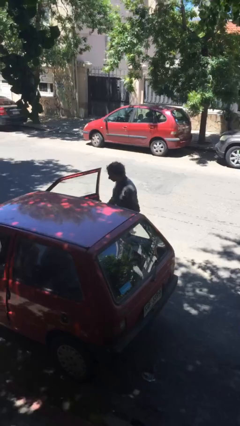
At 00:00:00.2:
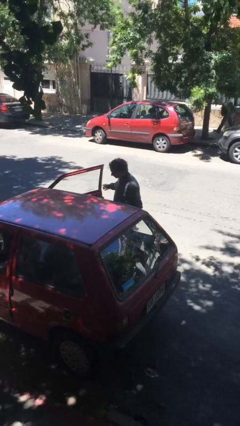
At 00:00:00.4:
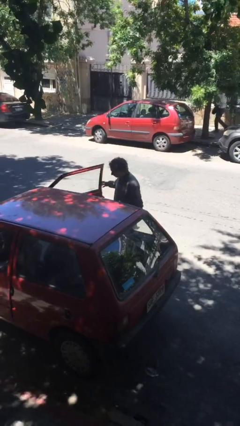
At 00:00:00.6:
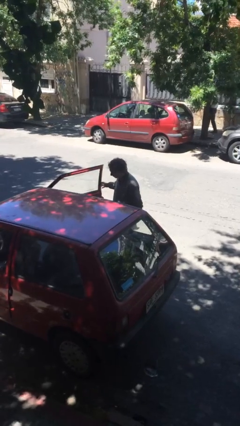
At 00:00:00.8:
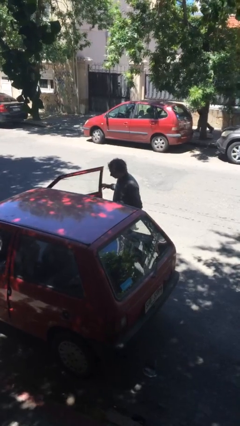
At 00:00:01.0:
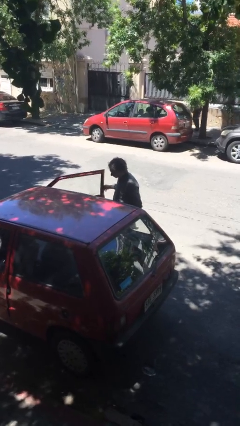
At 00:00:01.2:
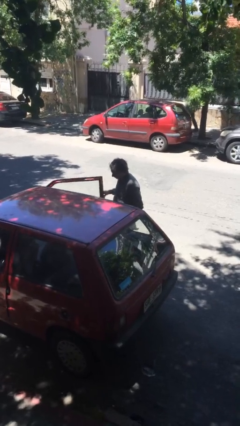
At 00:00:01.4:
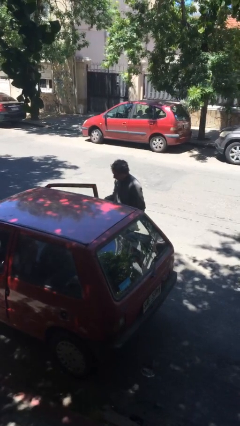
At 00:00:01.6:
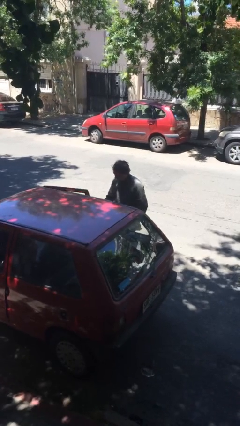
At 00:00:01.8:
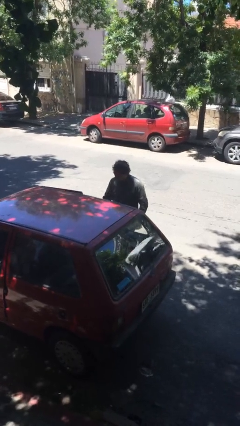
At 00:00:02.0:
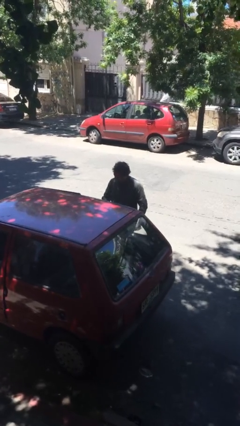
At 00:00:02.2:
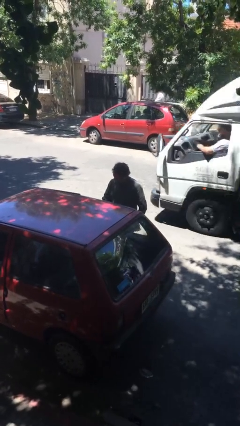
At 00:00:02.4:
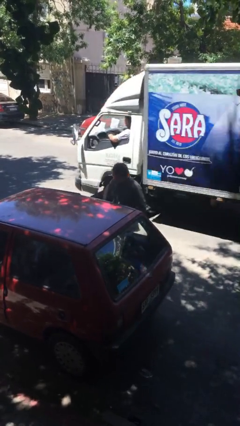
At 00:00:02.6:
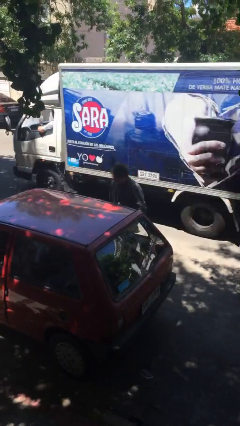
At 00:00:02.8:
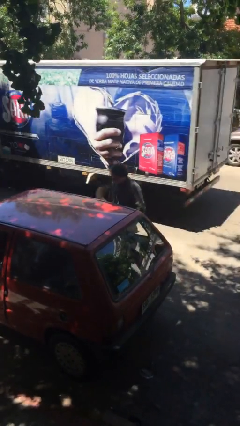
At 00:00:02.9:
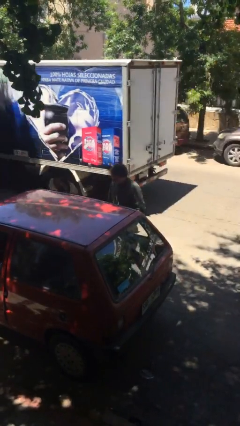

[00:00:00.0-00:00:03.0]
person closes car door

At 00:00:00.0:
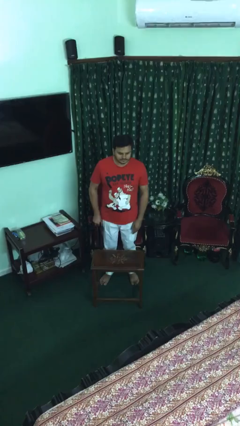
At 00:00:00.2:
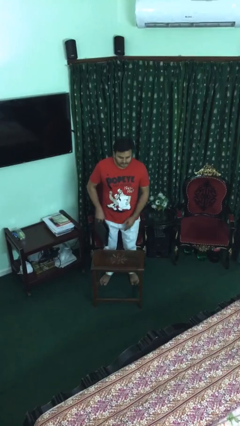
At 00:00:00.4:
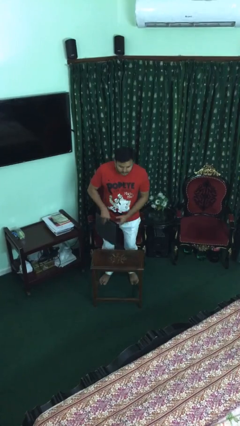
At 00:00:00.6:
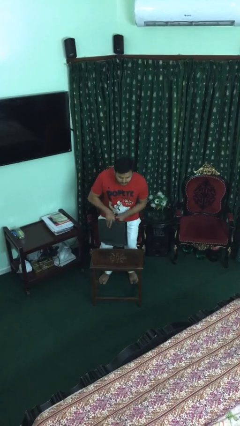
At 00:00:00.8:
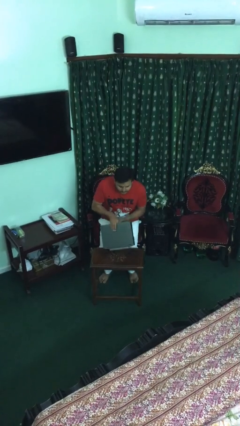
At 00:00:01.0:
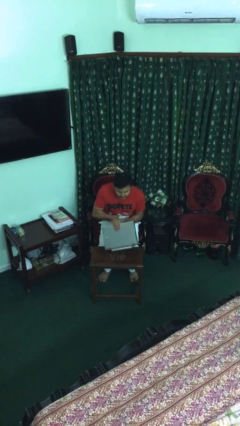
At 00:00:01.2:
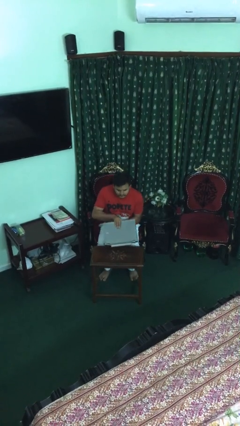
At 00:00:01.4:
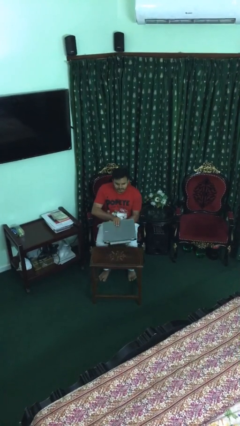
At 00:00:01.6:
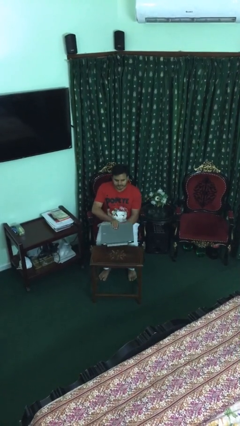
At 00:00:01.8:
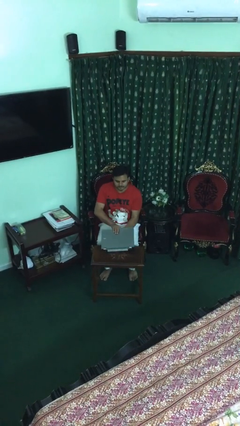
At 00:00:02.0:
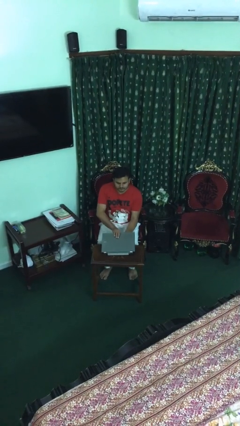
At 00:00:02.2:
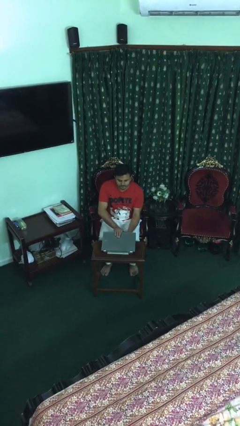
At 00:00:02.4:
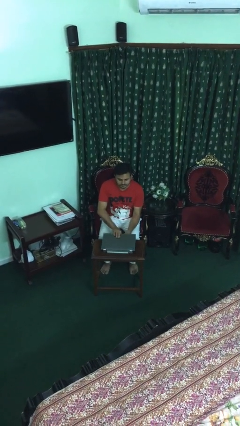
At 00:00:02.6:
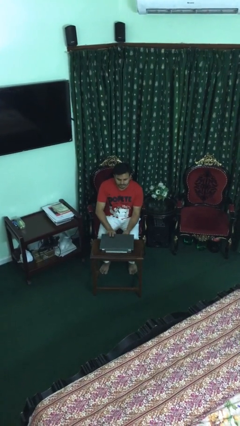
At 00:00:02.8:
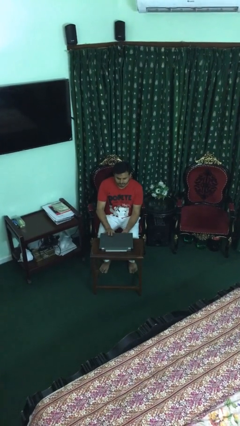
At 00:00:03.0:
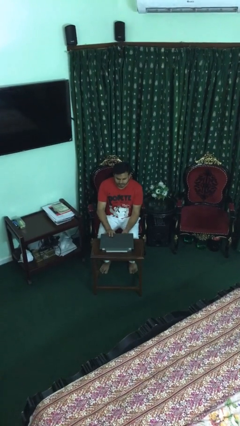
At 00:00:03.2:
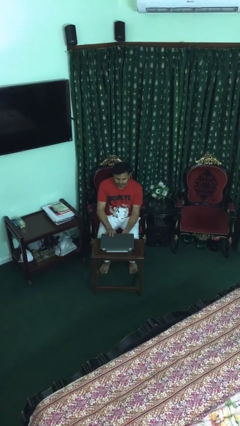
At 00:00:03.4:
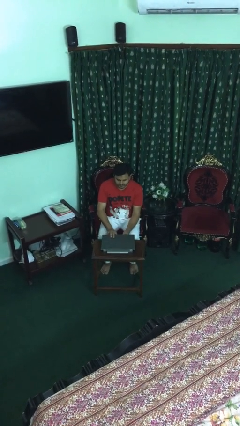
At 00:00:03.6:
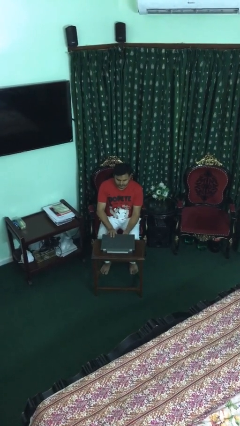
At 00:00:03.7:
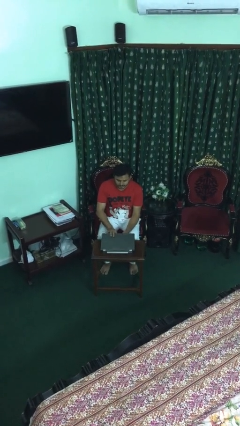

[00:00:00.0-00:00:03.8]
person sits down

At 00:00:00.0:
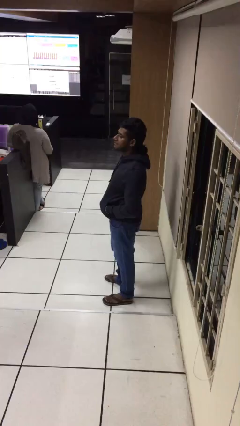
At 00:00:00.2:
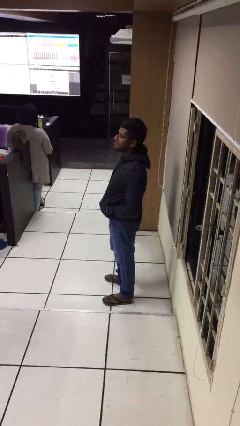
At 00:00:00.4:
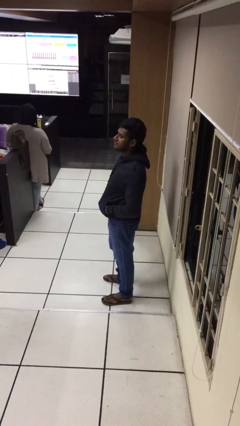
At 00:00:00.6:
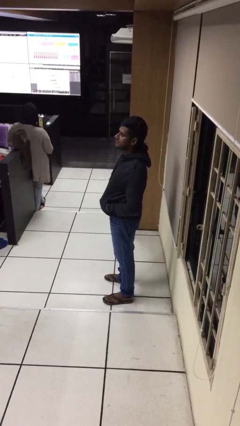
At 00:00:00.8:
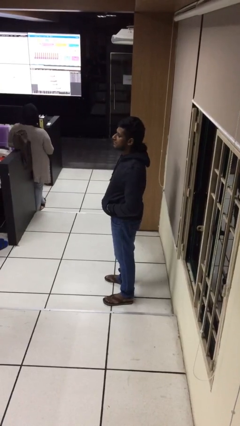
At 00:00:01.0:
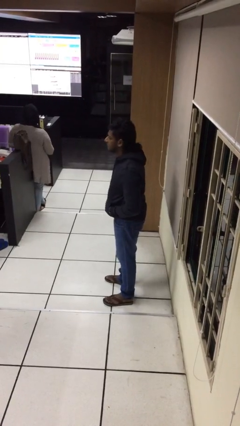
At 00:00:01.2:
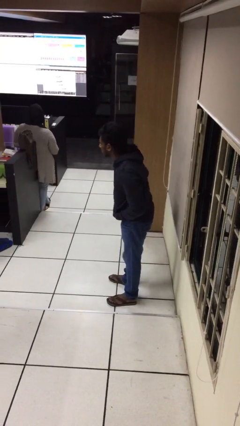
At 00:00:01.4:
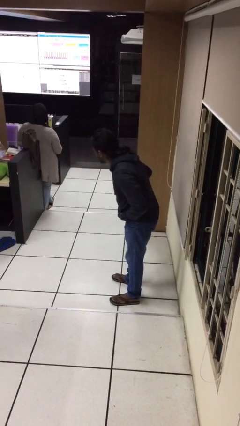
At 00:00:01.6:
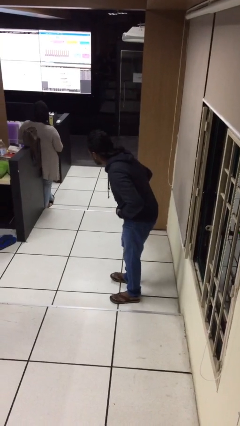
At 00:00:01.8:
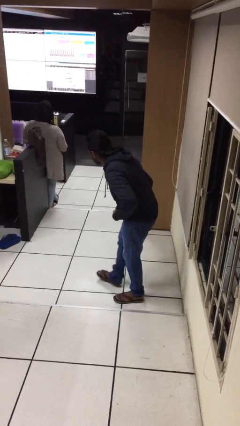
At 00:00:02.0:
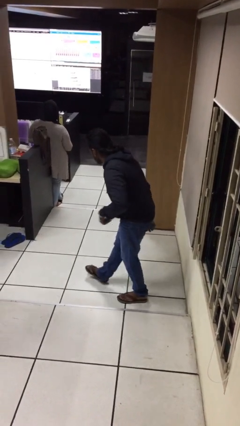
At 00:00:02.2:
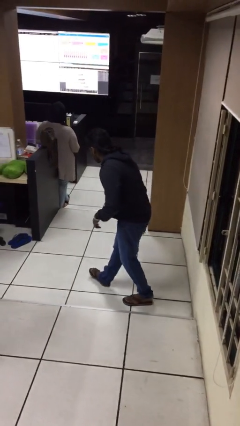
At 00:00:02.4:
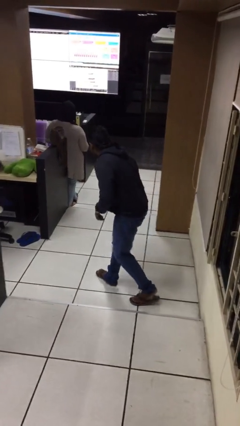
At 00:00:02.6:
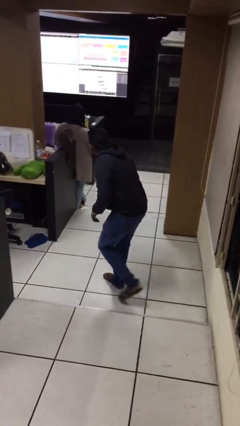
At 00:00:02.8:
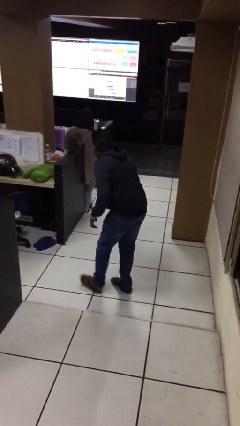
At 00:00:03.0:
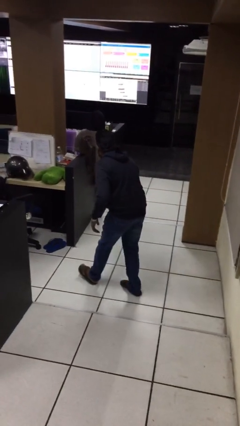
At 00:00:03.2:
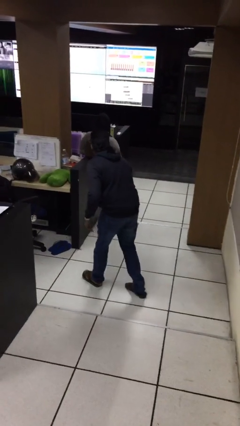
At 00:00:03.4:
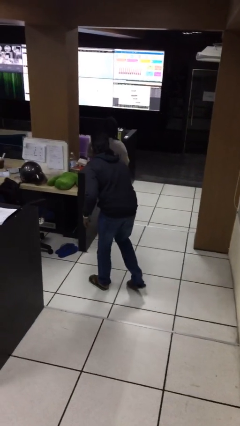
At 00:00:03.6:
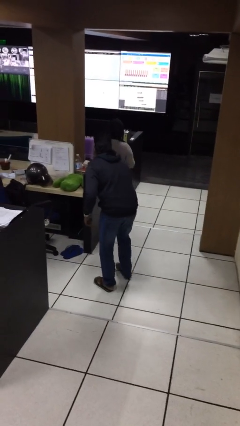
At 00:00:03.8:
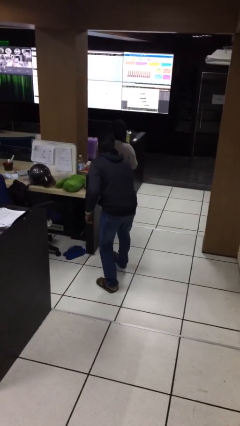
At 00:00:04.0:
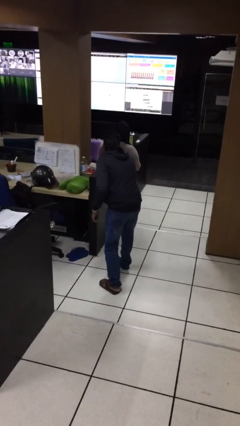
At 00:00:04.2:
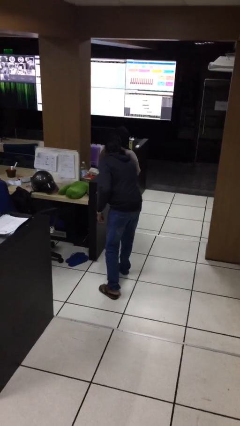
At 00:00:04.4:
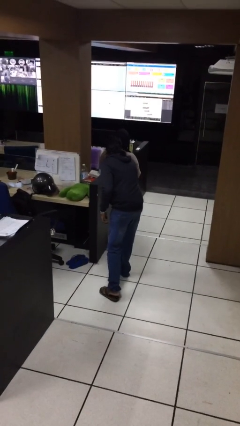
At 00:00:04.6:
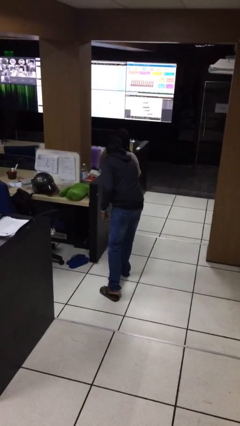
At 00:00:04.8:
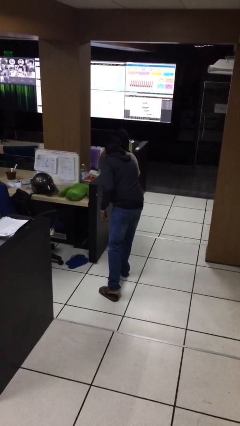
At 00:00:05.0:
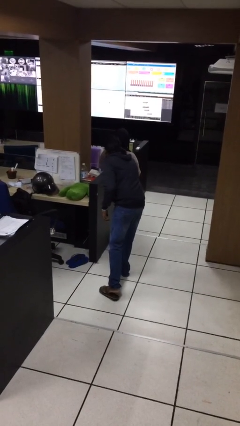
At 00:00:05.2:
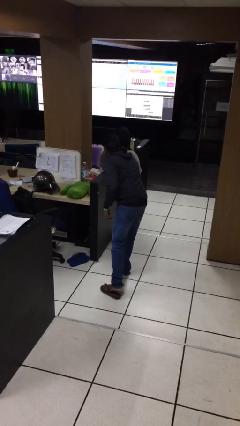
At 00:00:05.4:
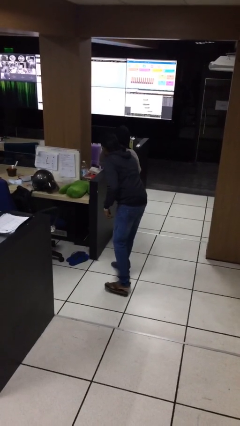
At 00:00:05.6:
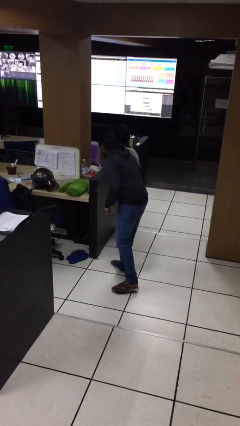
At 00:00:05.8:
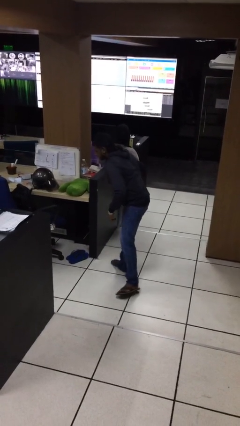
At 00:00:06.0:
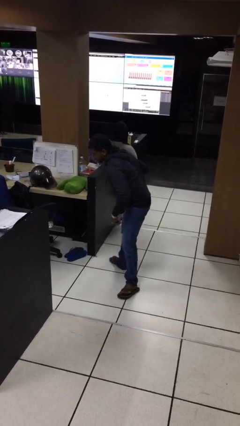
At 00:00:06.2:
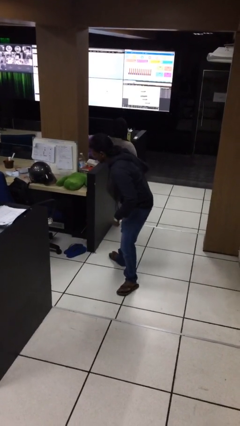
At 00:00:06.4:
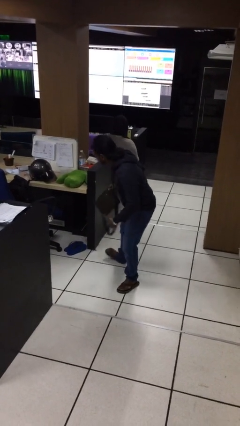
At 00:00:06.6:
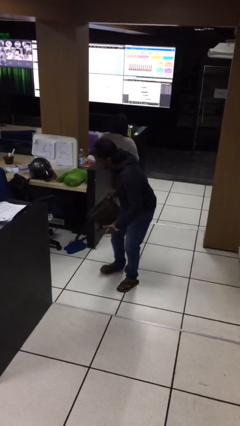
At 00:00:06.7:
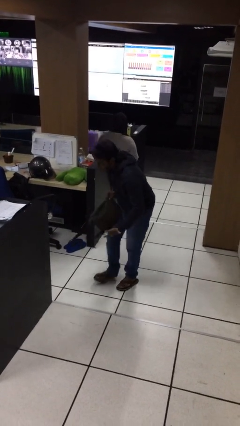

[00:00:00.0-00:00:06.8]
person steals object from person

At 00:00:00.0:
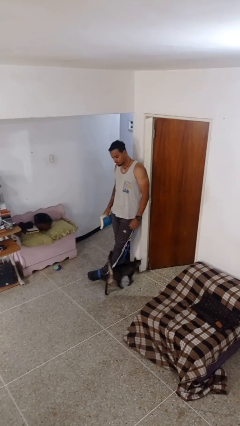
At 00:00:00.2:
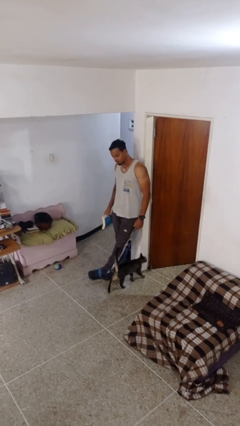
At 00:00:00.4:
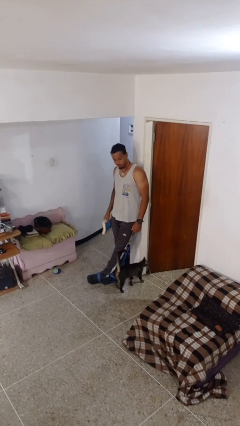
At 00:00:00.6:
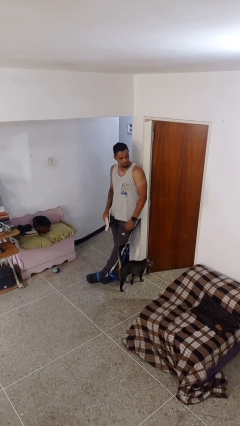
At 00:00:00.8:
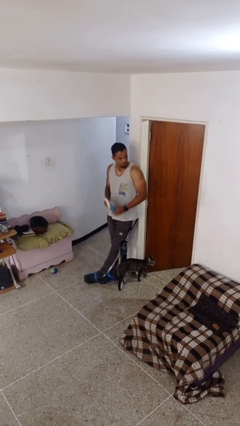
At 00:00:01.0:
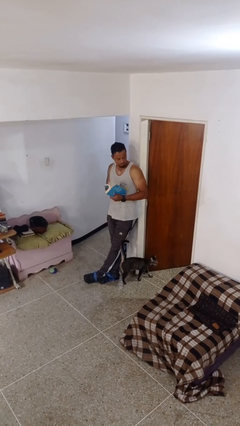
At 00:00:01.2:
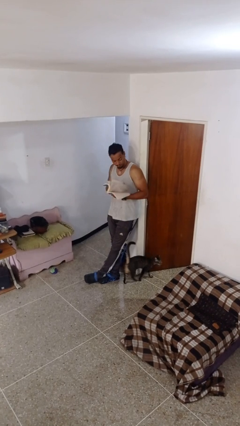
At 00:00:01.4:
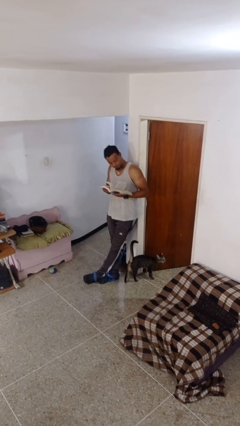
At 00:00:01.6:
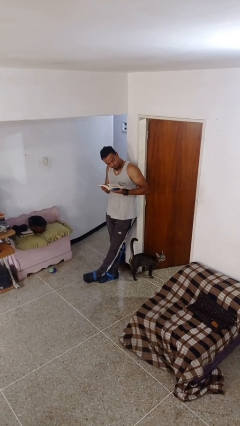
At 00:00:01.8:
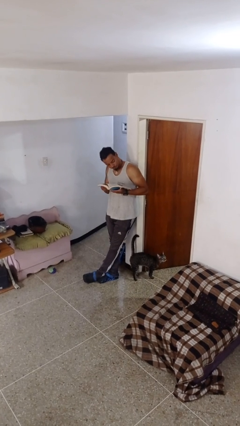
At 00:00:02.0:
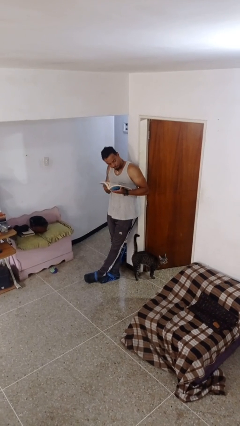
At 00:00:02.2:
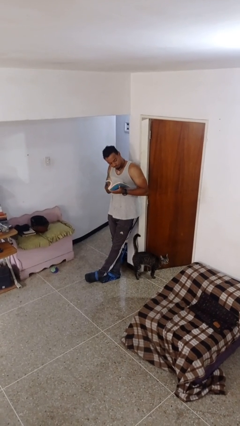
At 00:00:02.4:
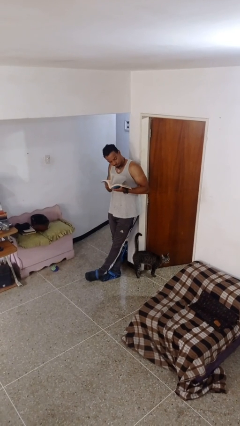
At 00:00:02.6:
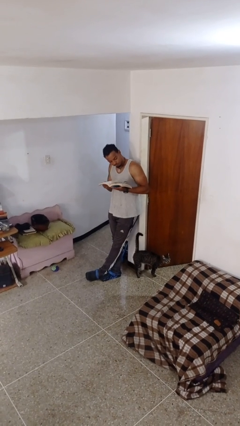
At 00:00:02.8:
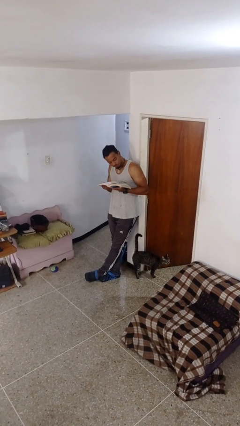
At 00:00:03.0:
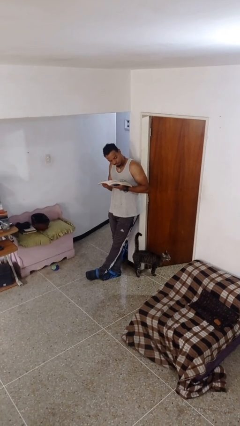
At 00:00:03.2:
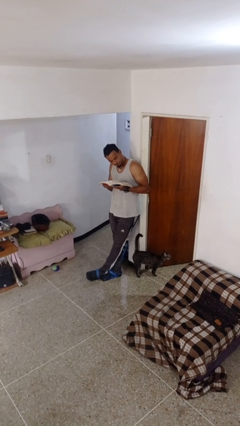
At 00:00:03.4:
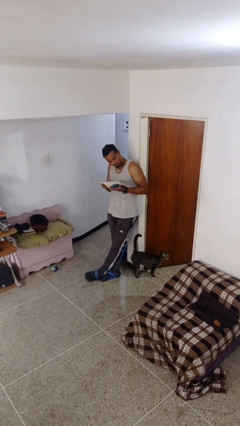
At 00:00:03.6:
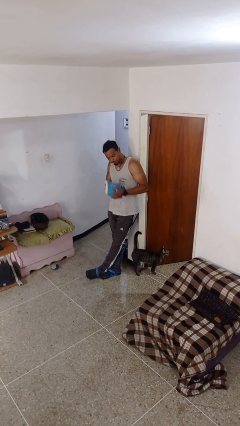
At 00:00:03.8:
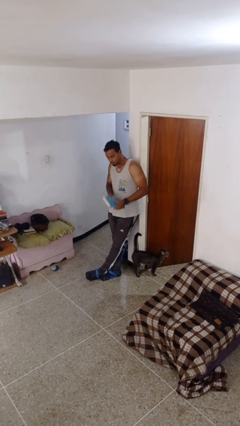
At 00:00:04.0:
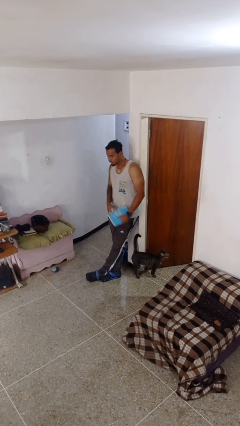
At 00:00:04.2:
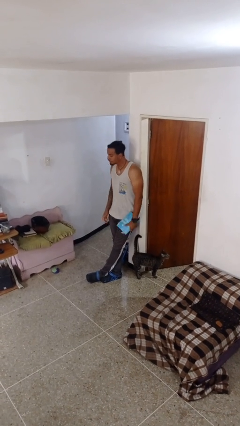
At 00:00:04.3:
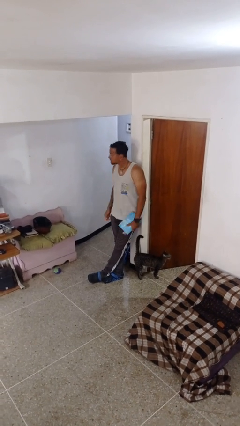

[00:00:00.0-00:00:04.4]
person reads book
